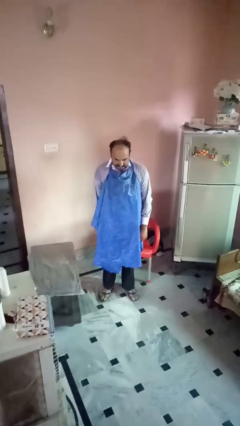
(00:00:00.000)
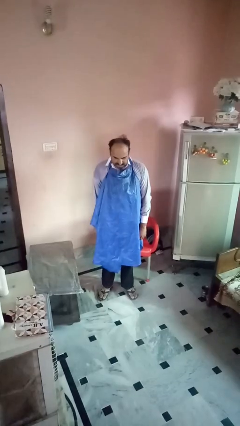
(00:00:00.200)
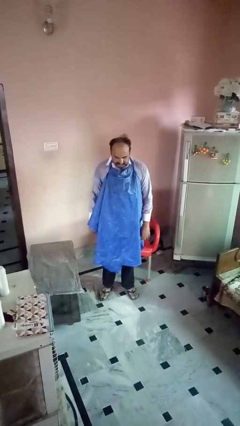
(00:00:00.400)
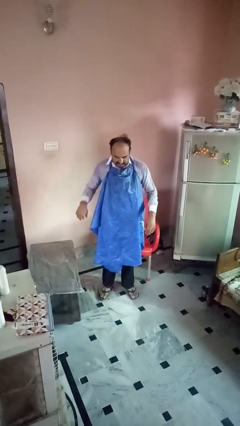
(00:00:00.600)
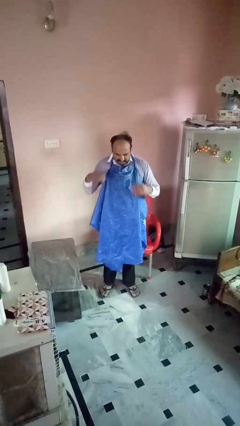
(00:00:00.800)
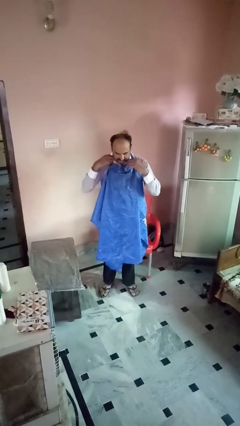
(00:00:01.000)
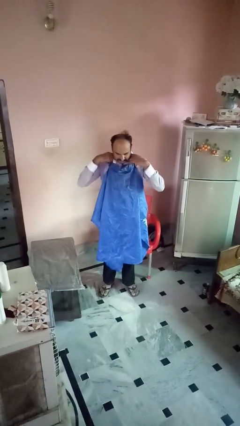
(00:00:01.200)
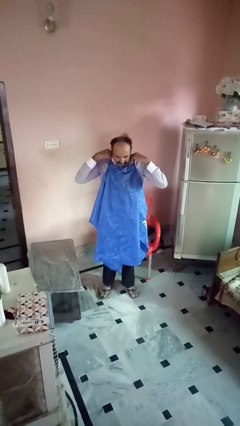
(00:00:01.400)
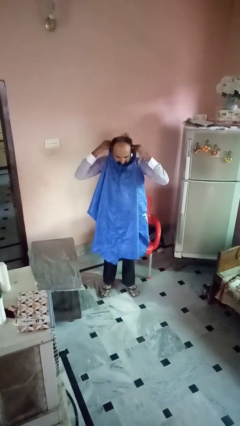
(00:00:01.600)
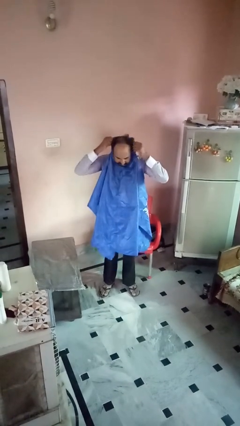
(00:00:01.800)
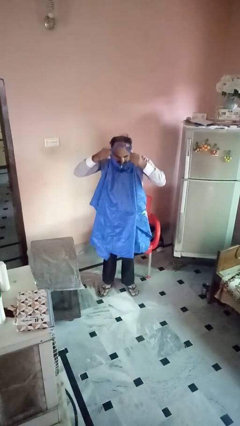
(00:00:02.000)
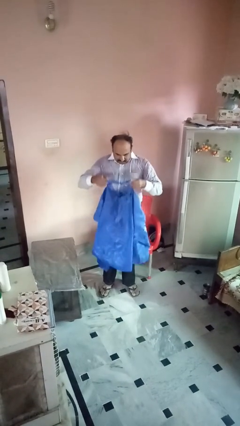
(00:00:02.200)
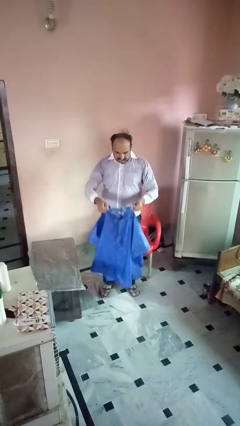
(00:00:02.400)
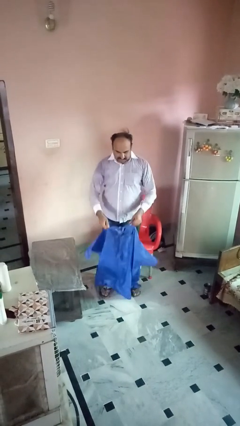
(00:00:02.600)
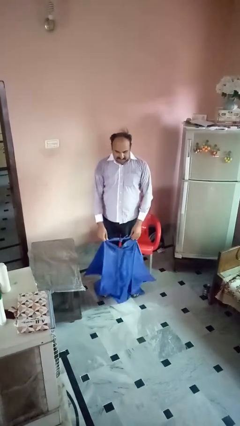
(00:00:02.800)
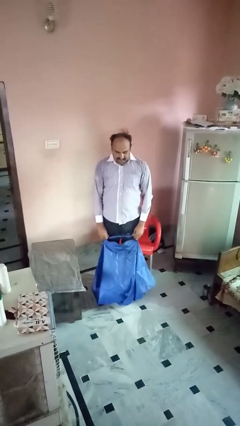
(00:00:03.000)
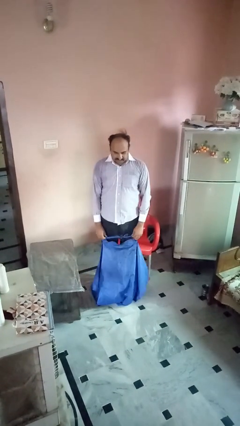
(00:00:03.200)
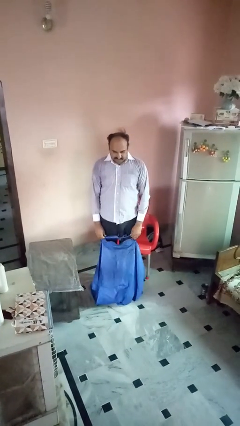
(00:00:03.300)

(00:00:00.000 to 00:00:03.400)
person takes off apron

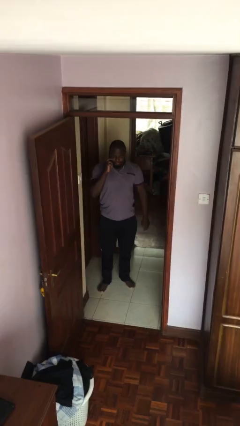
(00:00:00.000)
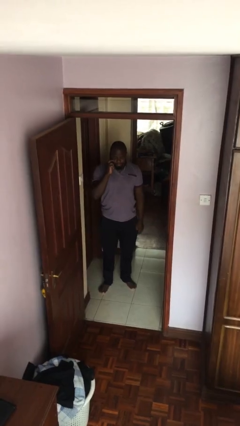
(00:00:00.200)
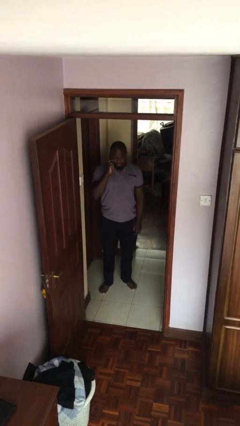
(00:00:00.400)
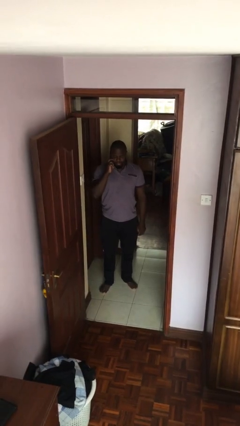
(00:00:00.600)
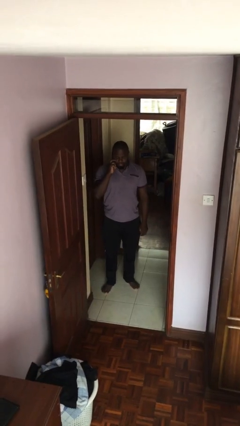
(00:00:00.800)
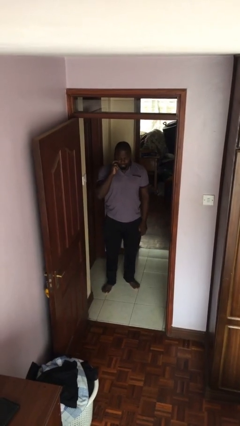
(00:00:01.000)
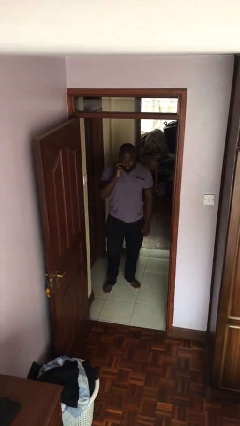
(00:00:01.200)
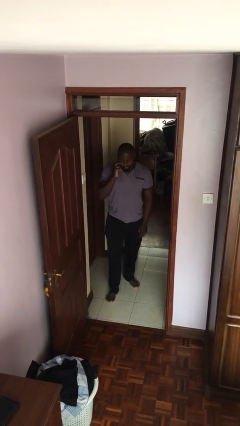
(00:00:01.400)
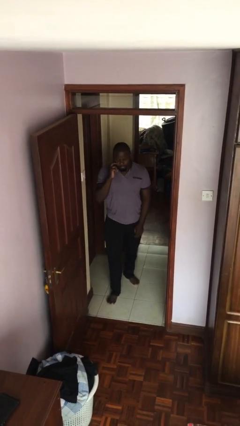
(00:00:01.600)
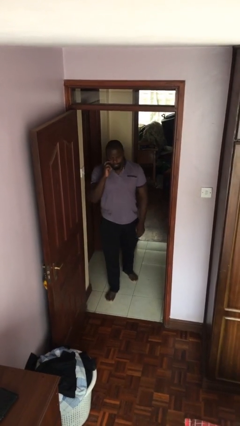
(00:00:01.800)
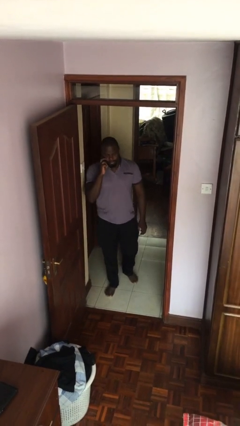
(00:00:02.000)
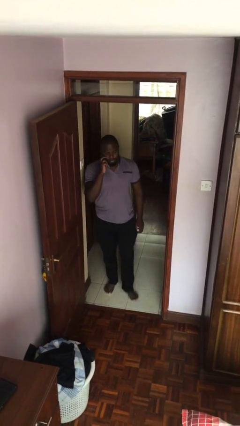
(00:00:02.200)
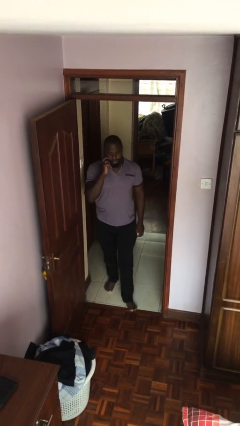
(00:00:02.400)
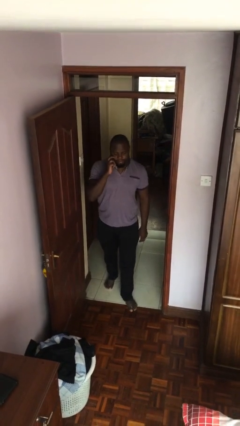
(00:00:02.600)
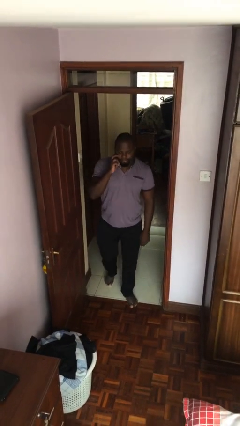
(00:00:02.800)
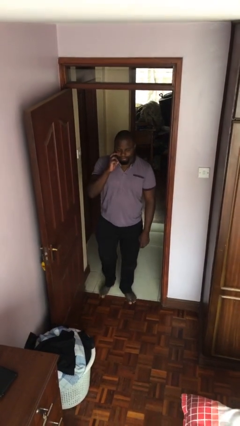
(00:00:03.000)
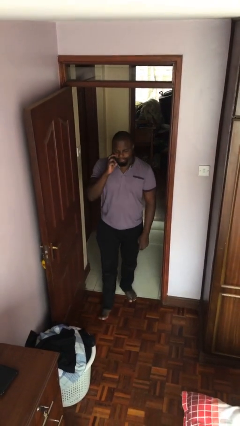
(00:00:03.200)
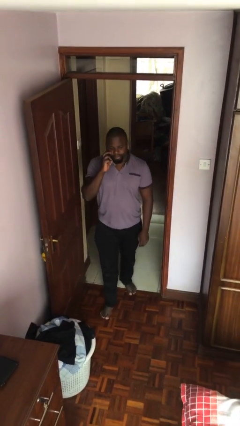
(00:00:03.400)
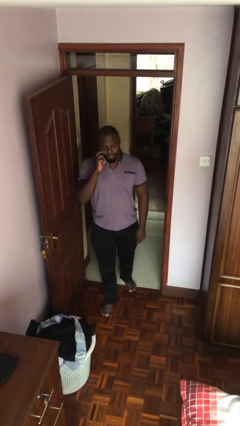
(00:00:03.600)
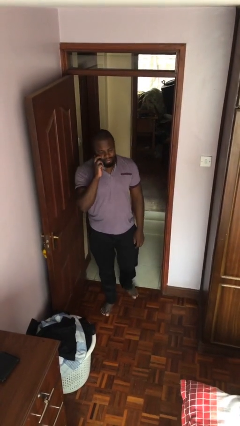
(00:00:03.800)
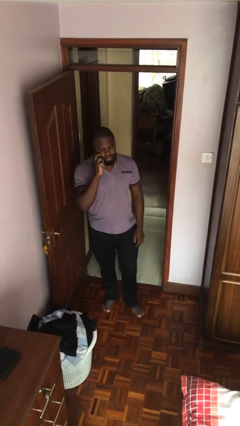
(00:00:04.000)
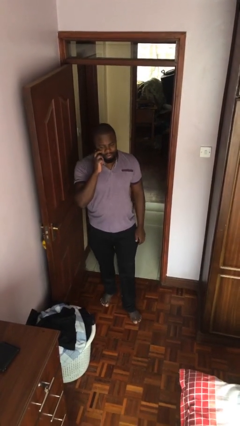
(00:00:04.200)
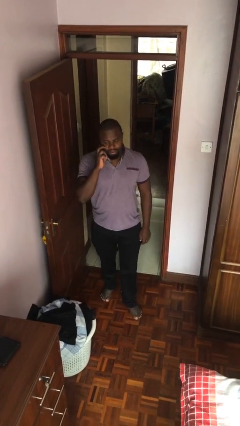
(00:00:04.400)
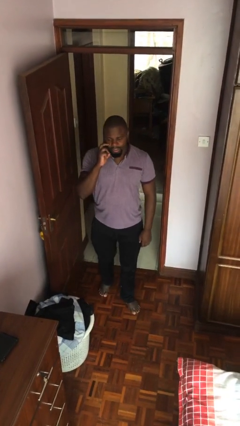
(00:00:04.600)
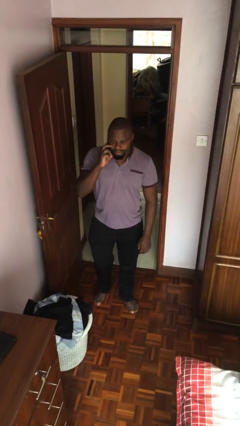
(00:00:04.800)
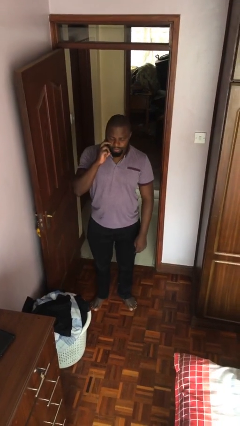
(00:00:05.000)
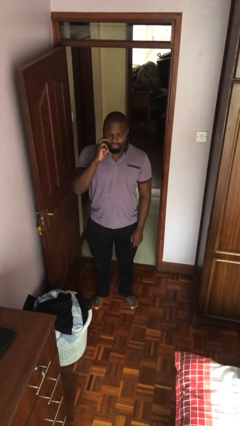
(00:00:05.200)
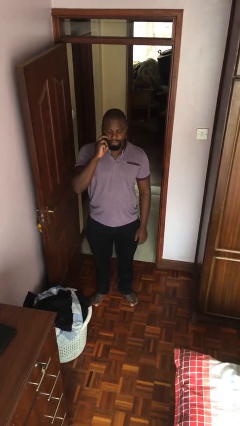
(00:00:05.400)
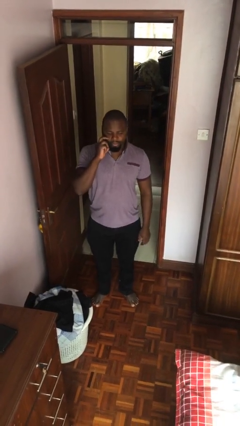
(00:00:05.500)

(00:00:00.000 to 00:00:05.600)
person enters scene through structure

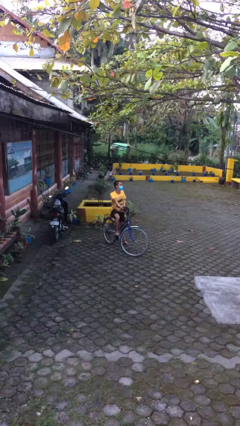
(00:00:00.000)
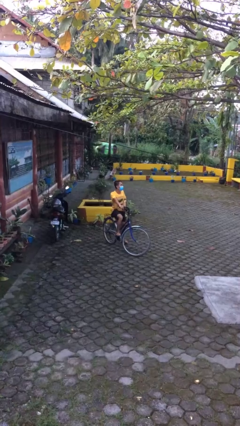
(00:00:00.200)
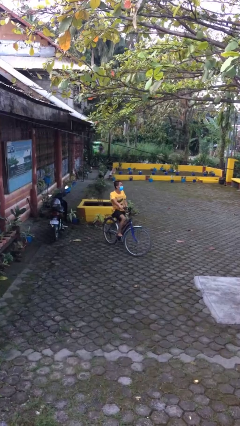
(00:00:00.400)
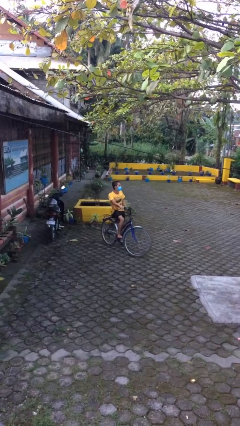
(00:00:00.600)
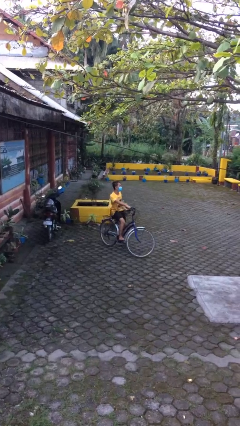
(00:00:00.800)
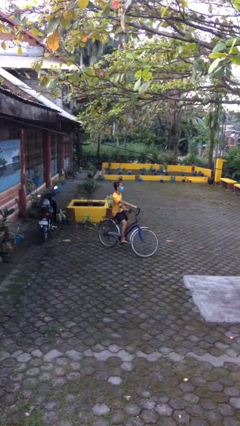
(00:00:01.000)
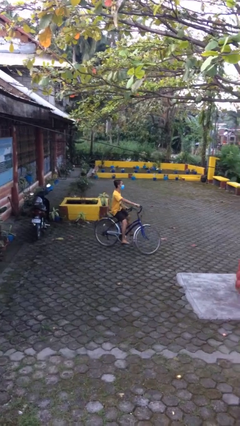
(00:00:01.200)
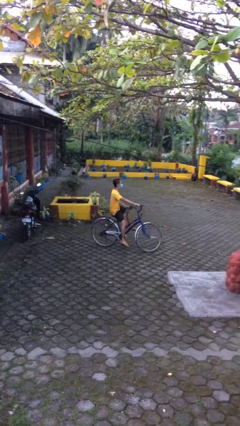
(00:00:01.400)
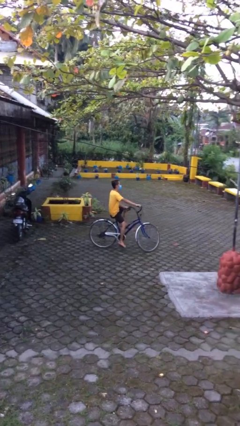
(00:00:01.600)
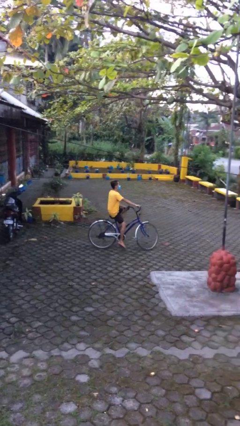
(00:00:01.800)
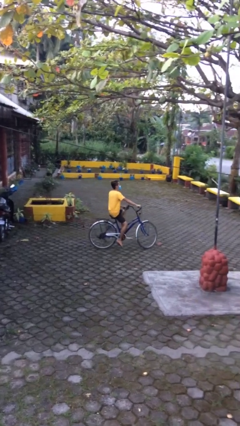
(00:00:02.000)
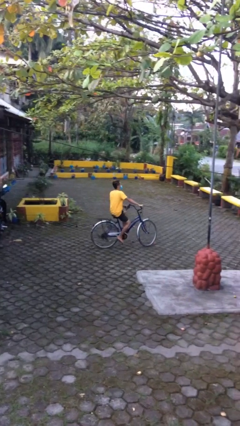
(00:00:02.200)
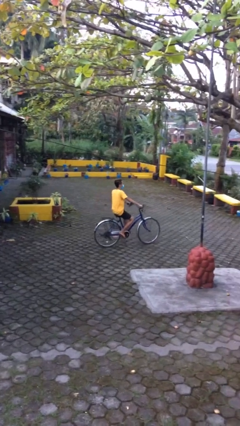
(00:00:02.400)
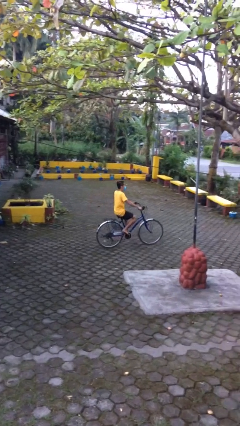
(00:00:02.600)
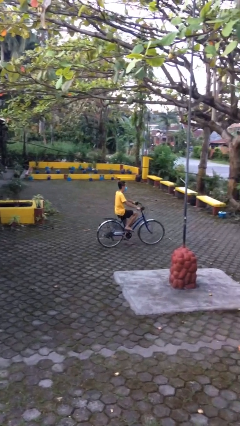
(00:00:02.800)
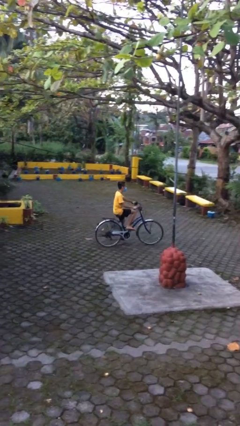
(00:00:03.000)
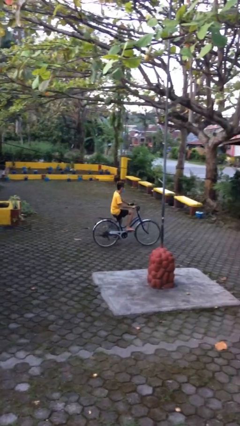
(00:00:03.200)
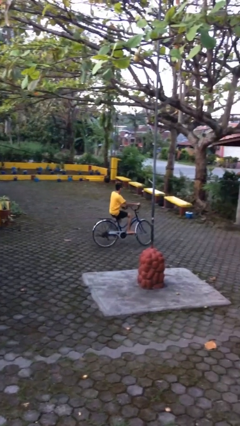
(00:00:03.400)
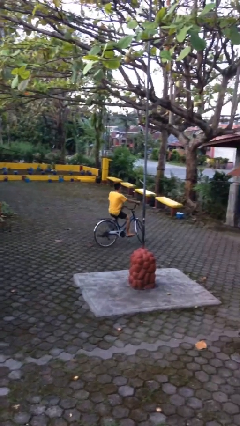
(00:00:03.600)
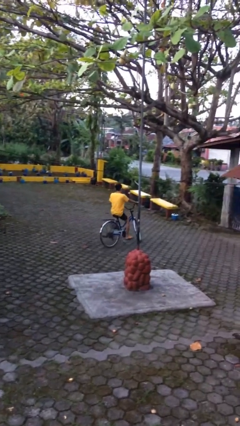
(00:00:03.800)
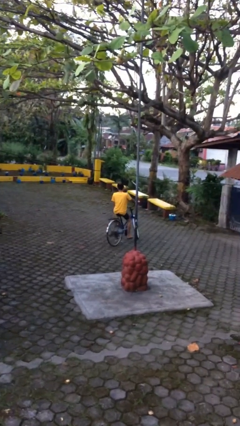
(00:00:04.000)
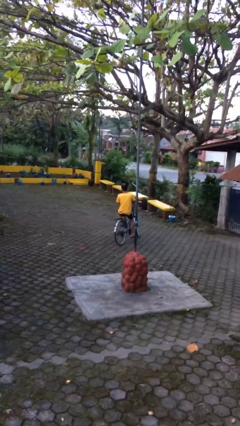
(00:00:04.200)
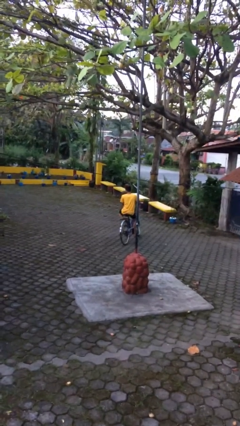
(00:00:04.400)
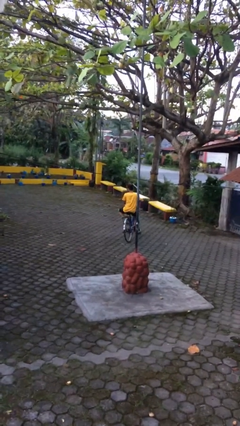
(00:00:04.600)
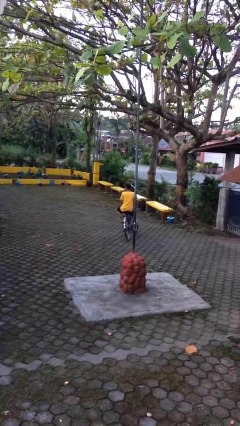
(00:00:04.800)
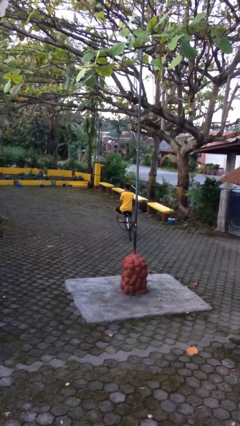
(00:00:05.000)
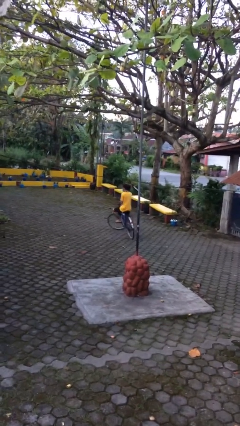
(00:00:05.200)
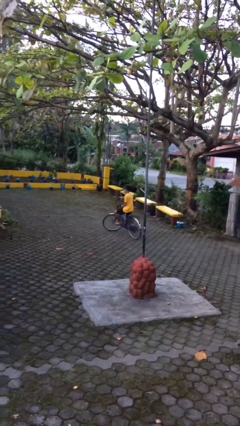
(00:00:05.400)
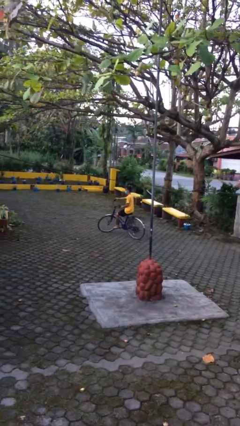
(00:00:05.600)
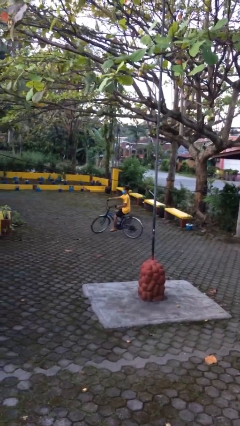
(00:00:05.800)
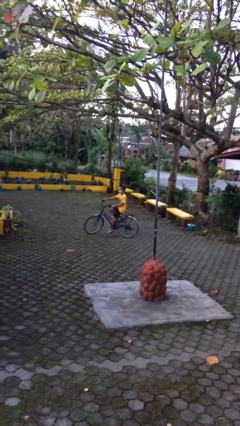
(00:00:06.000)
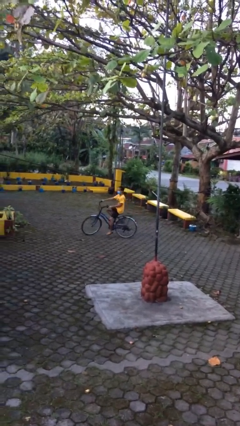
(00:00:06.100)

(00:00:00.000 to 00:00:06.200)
person rides bicycle

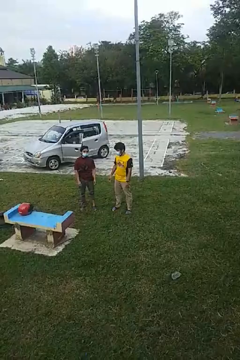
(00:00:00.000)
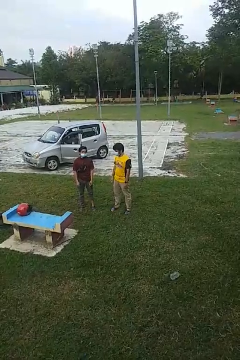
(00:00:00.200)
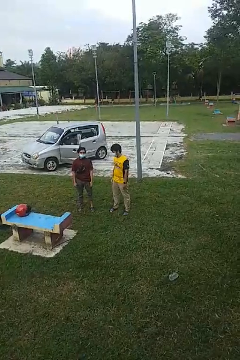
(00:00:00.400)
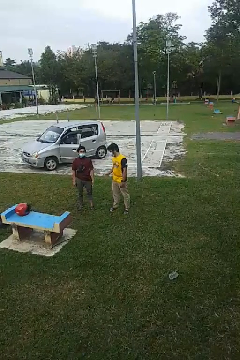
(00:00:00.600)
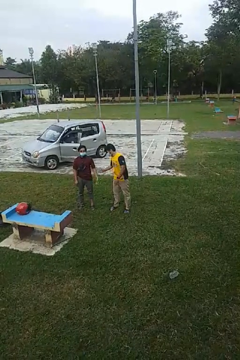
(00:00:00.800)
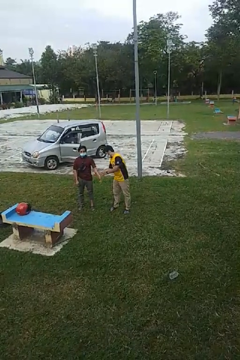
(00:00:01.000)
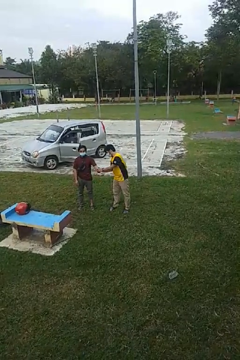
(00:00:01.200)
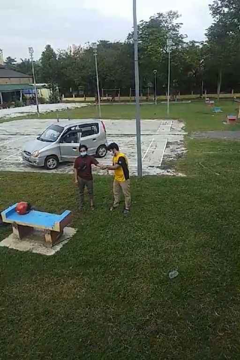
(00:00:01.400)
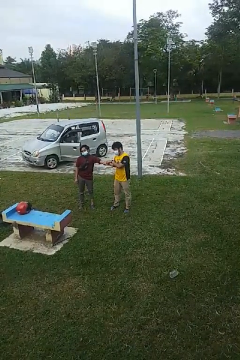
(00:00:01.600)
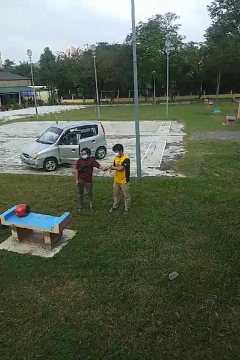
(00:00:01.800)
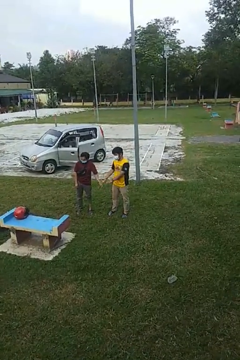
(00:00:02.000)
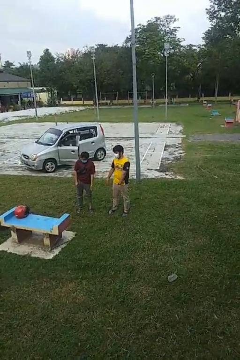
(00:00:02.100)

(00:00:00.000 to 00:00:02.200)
person grabs person by forearm

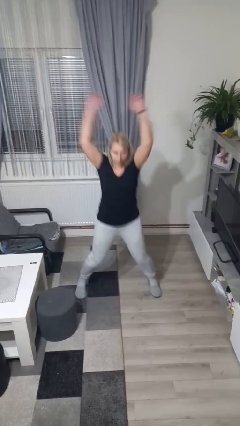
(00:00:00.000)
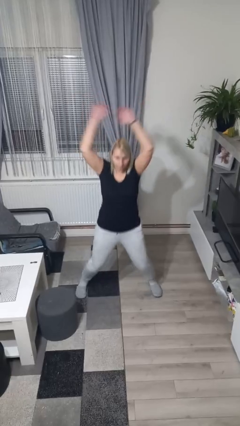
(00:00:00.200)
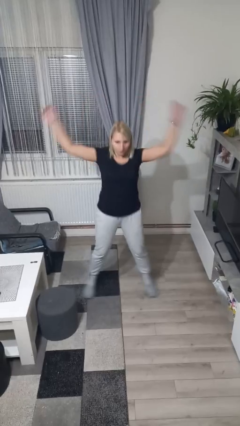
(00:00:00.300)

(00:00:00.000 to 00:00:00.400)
person exercises with jumping jacks
